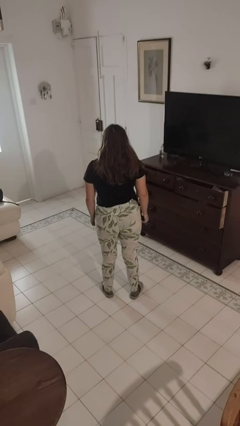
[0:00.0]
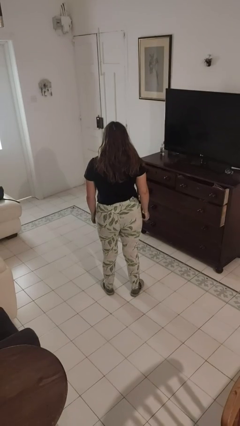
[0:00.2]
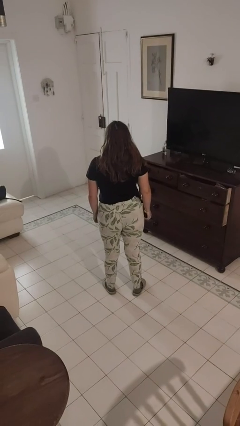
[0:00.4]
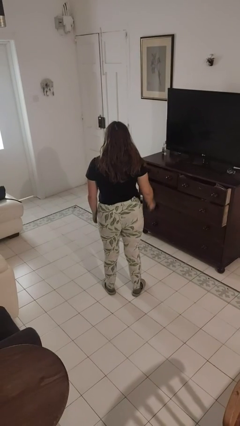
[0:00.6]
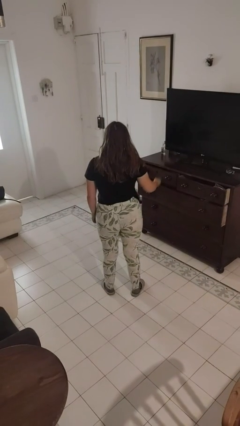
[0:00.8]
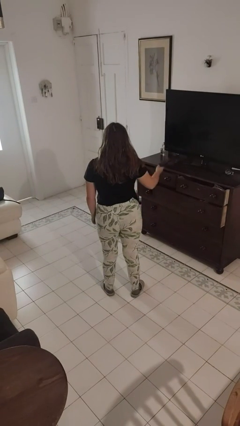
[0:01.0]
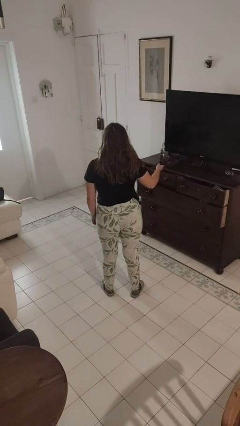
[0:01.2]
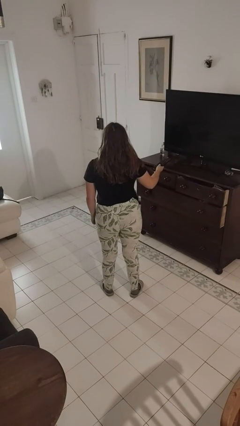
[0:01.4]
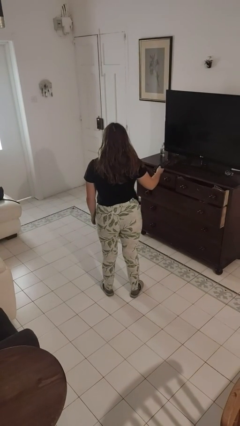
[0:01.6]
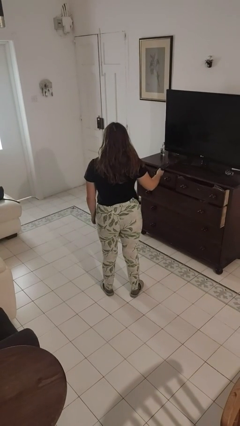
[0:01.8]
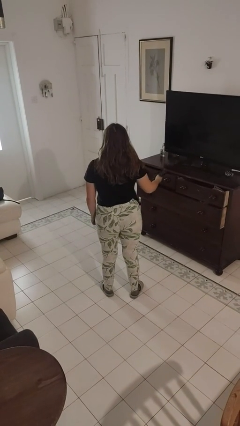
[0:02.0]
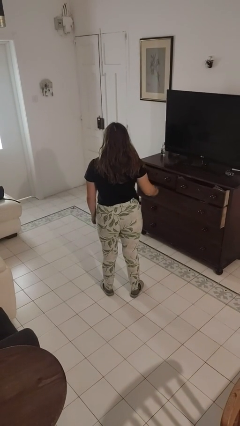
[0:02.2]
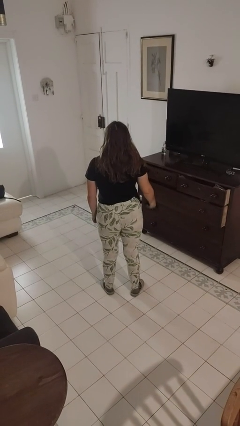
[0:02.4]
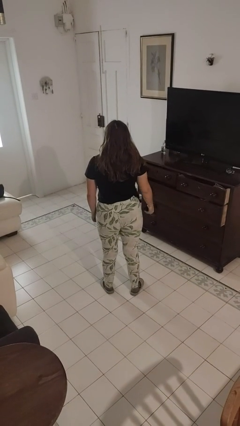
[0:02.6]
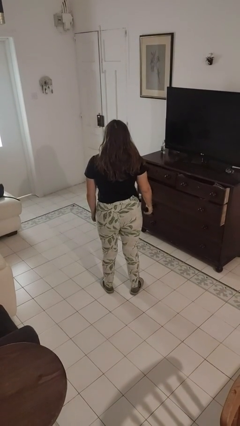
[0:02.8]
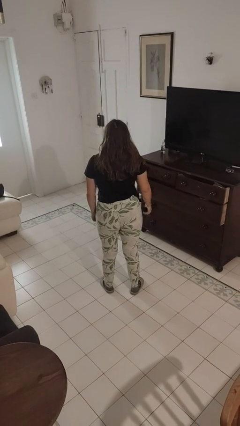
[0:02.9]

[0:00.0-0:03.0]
person uses television remote

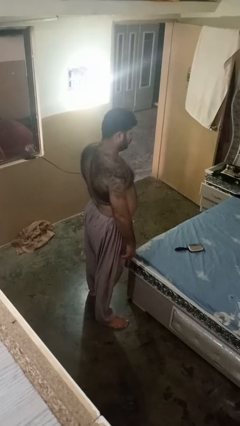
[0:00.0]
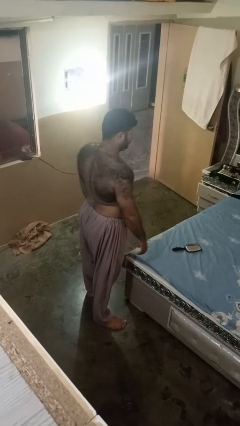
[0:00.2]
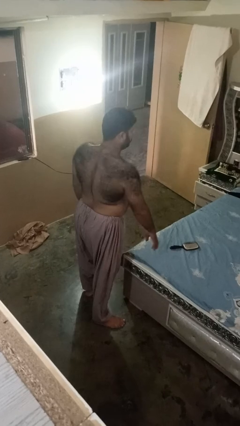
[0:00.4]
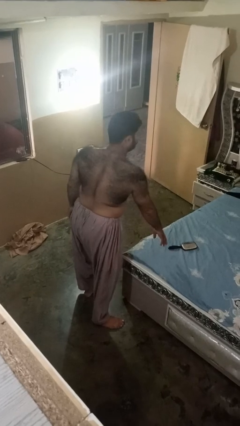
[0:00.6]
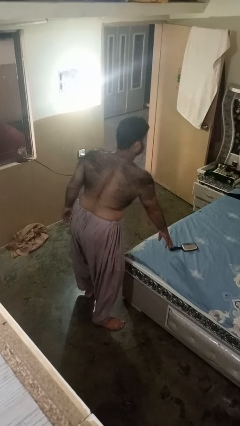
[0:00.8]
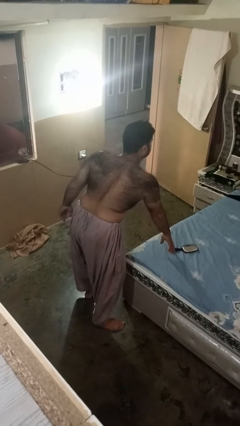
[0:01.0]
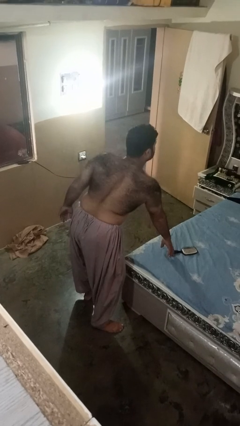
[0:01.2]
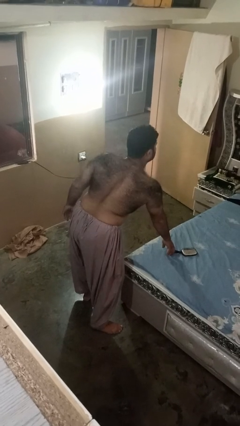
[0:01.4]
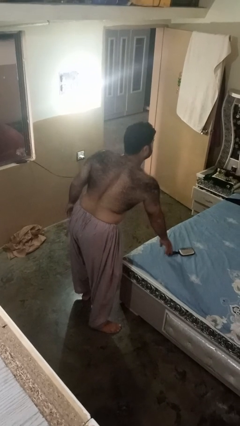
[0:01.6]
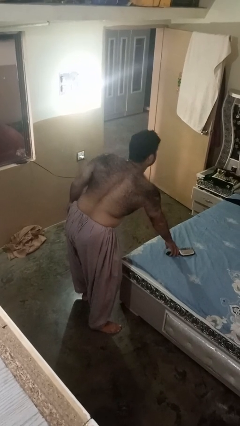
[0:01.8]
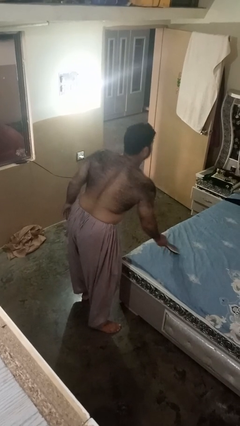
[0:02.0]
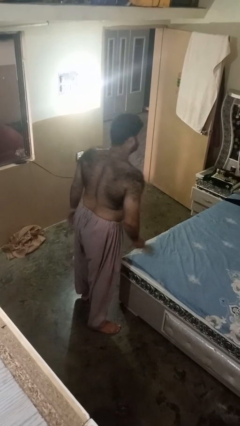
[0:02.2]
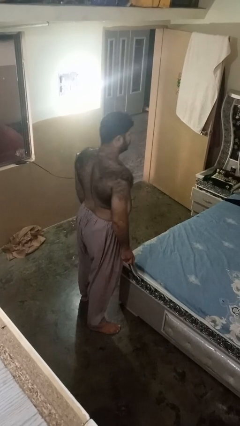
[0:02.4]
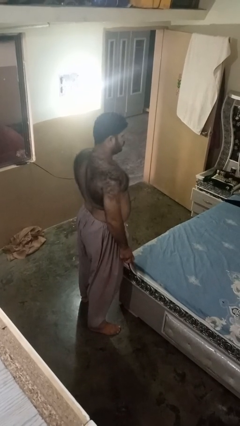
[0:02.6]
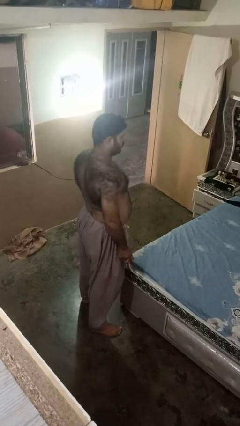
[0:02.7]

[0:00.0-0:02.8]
person picks up object from bed

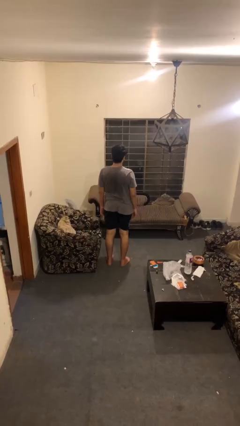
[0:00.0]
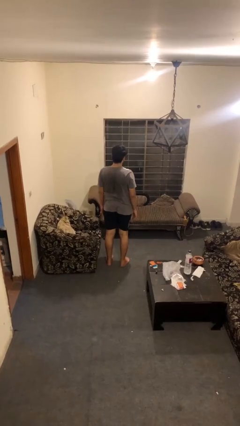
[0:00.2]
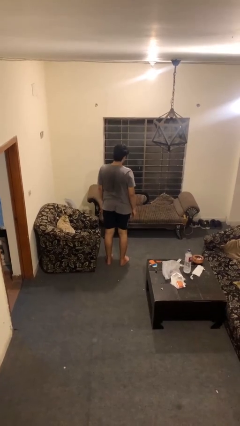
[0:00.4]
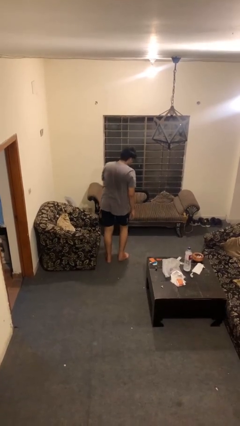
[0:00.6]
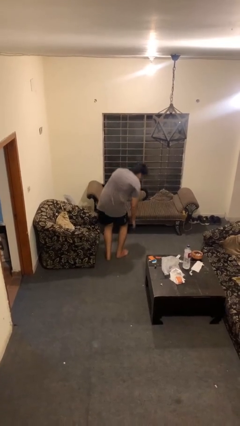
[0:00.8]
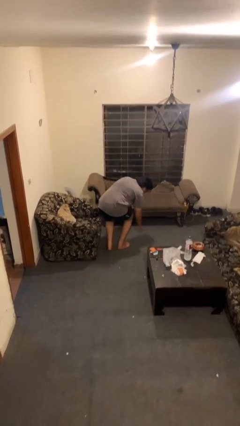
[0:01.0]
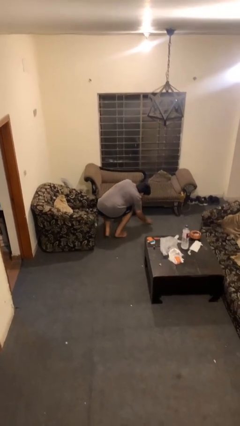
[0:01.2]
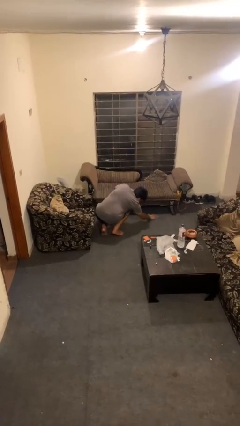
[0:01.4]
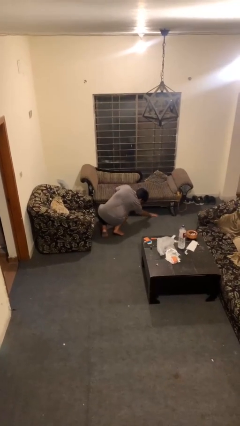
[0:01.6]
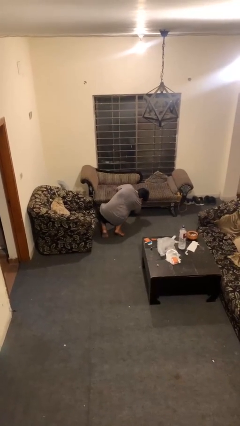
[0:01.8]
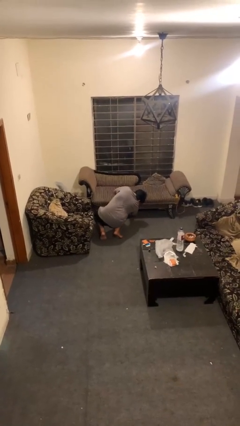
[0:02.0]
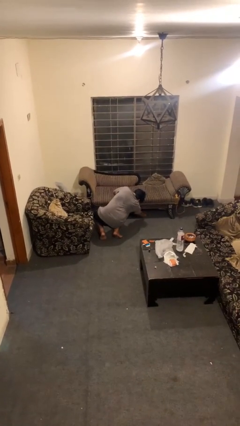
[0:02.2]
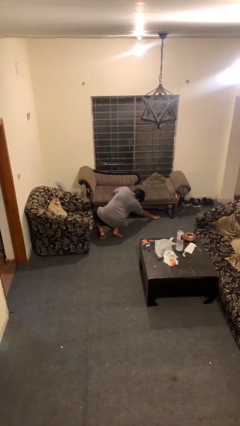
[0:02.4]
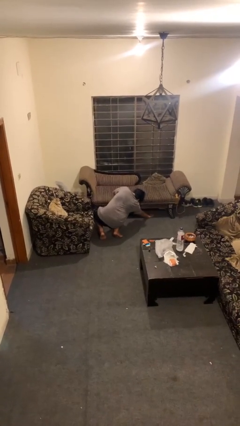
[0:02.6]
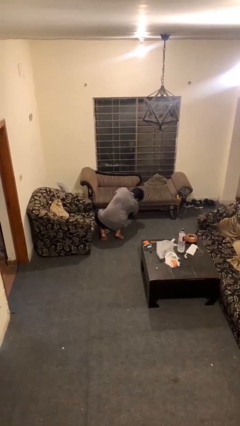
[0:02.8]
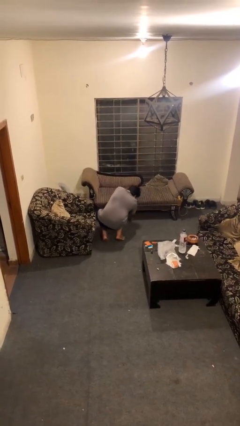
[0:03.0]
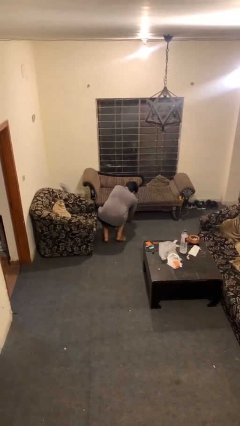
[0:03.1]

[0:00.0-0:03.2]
person searches under couch

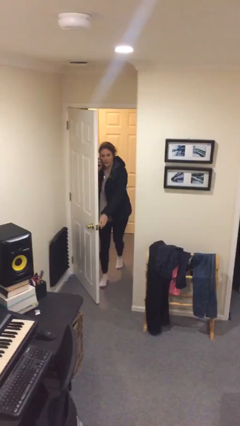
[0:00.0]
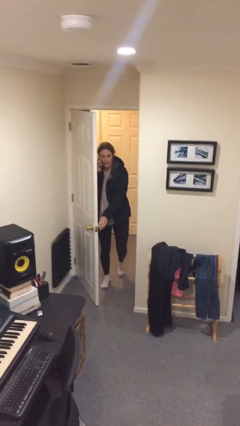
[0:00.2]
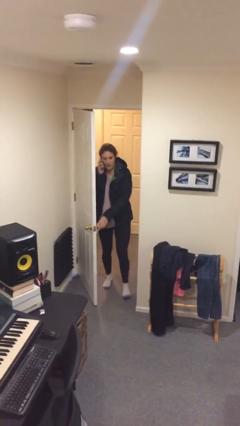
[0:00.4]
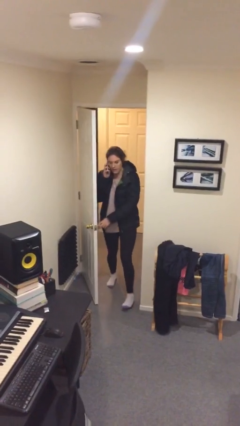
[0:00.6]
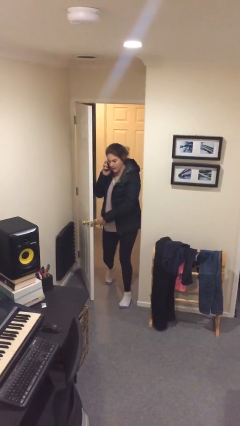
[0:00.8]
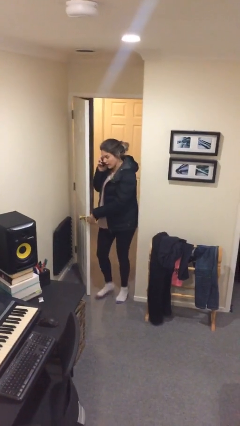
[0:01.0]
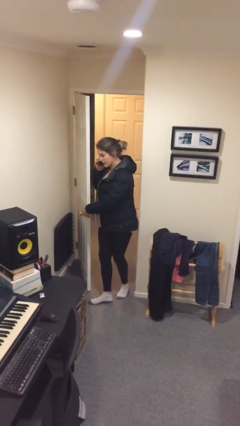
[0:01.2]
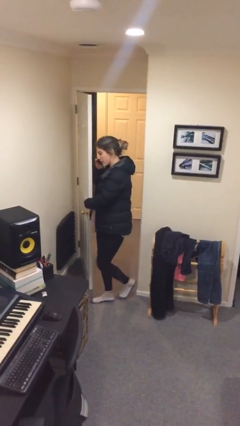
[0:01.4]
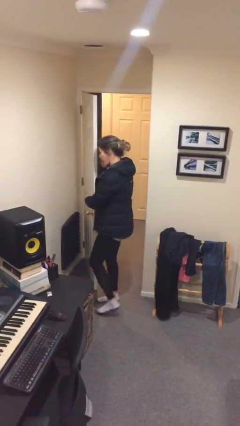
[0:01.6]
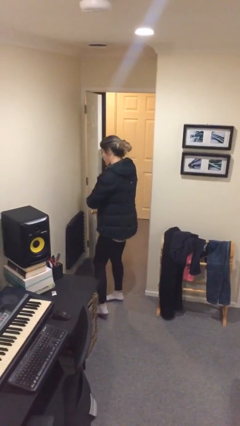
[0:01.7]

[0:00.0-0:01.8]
person enters scene through structure

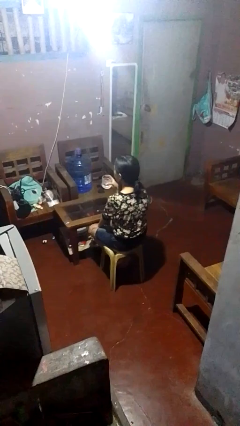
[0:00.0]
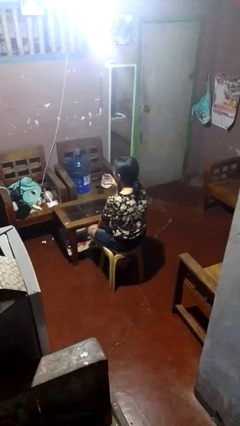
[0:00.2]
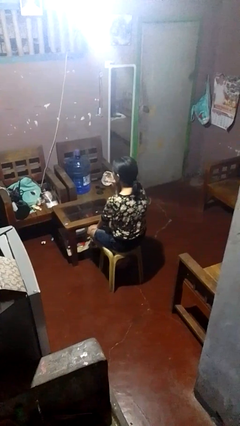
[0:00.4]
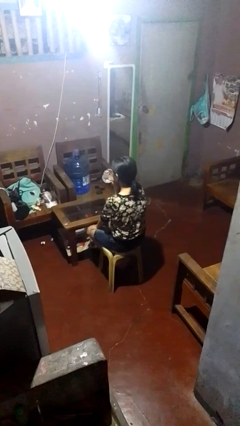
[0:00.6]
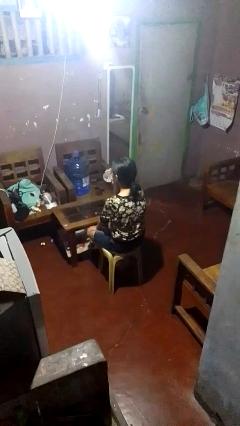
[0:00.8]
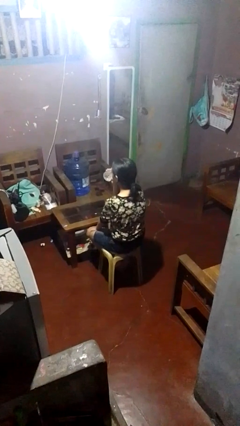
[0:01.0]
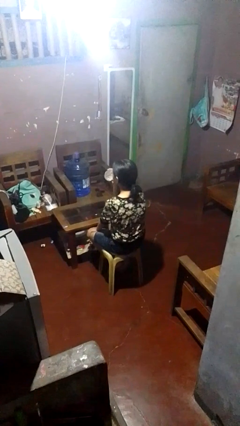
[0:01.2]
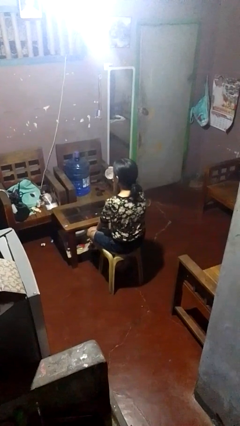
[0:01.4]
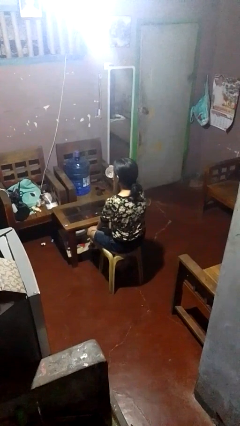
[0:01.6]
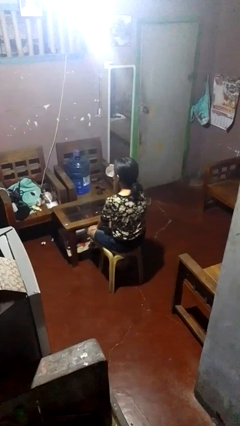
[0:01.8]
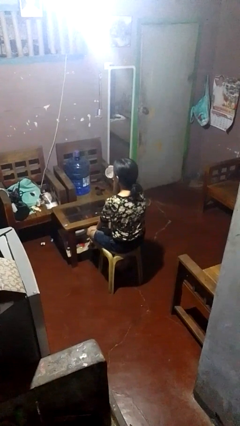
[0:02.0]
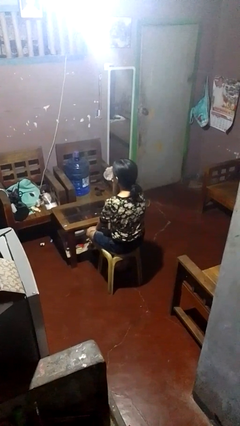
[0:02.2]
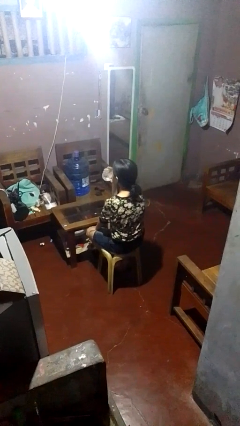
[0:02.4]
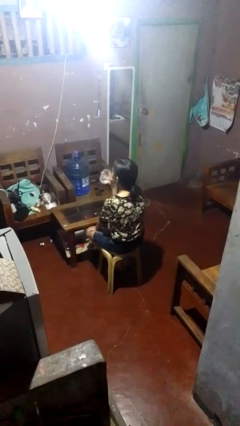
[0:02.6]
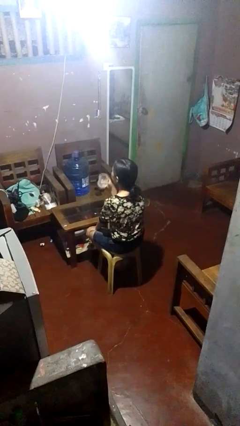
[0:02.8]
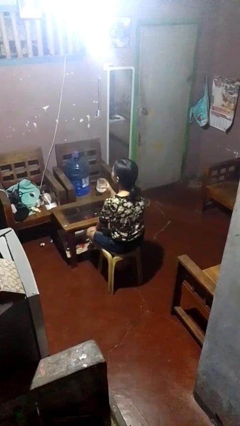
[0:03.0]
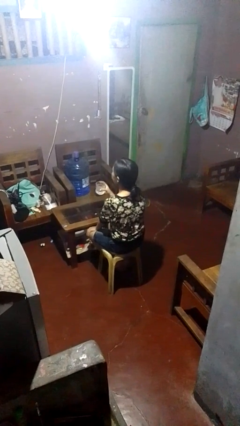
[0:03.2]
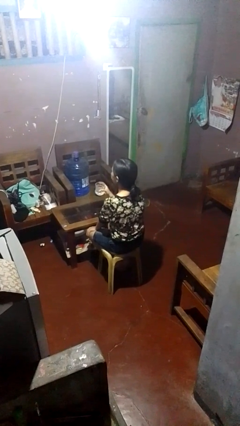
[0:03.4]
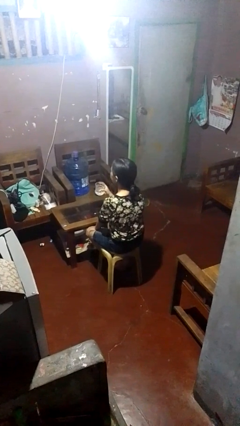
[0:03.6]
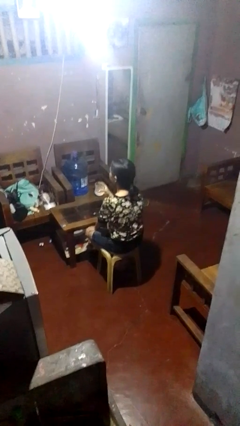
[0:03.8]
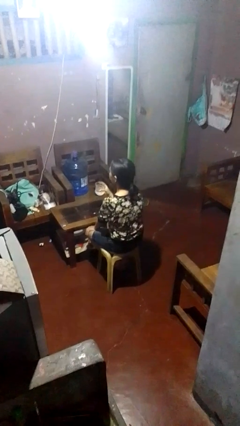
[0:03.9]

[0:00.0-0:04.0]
person drinks from mug

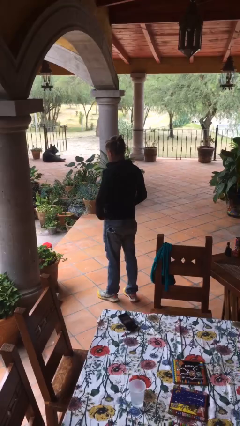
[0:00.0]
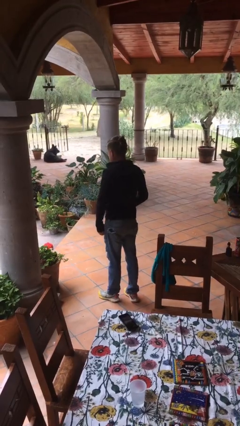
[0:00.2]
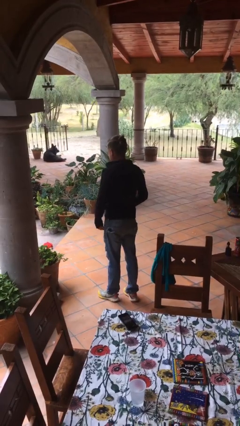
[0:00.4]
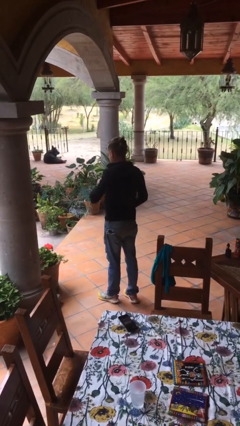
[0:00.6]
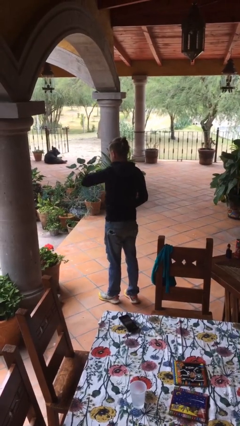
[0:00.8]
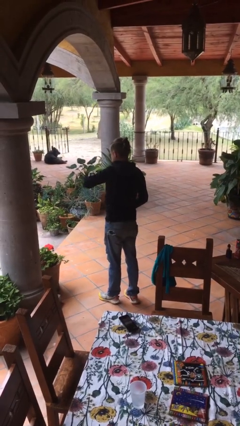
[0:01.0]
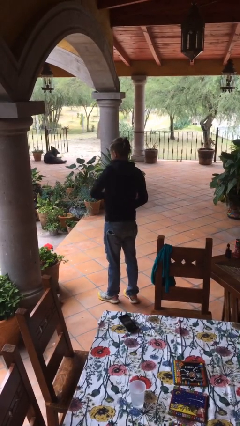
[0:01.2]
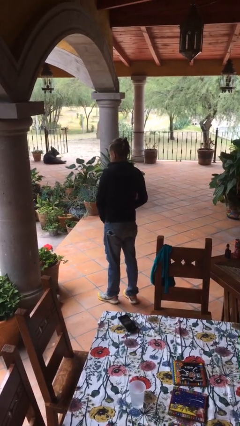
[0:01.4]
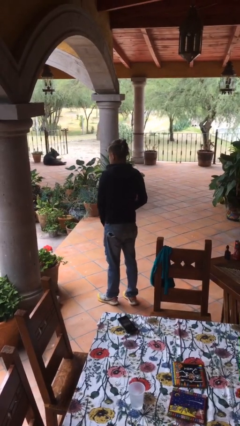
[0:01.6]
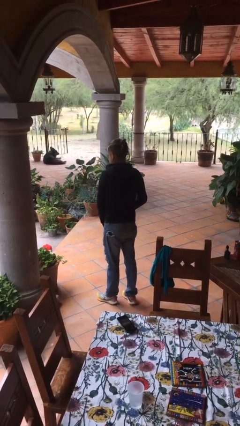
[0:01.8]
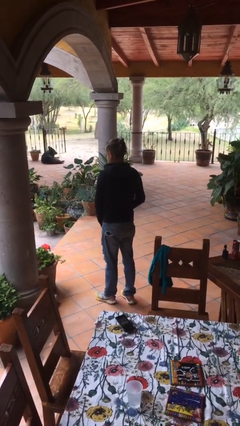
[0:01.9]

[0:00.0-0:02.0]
person unzips jacket

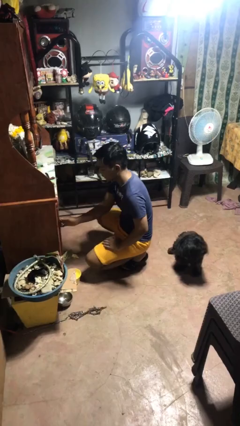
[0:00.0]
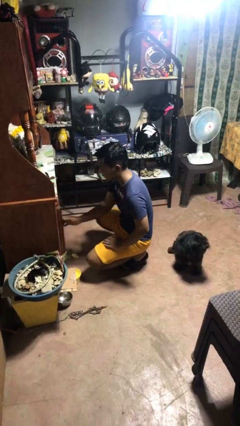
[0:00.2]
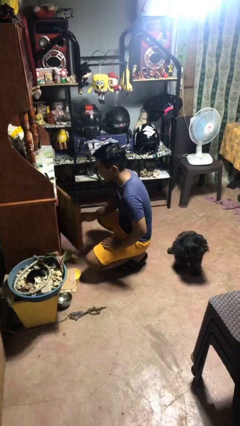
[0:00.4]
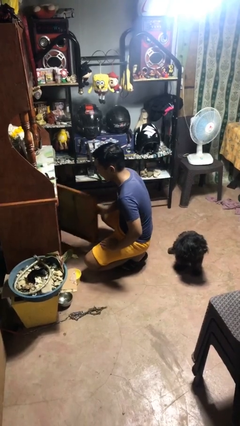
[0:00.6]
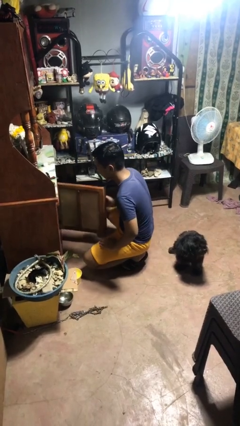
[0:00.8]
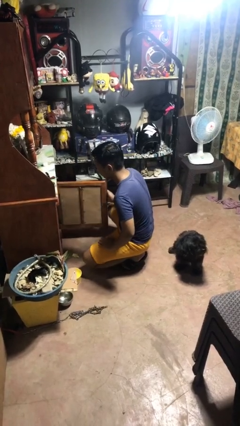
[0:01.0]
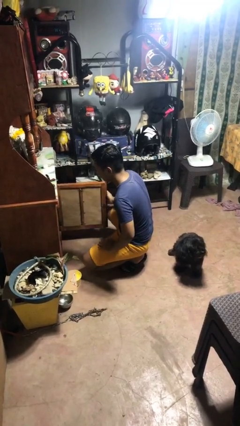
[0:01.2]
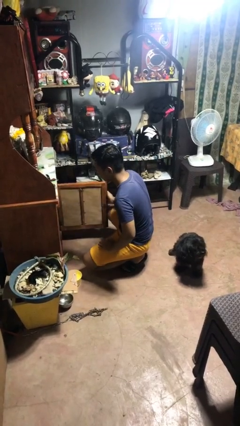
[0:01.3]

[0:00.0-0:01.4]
person opens cabinet
